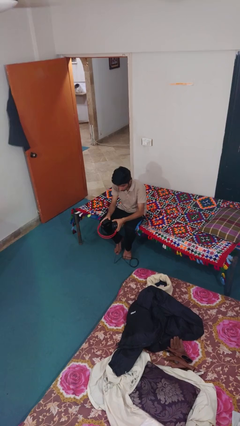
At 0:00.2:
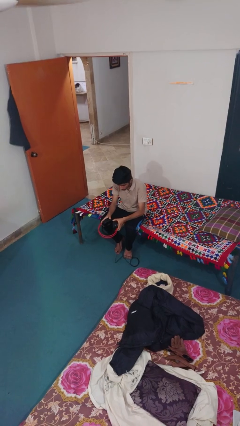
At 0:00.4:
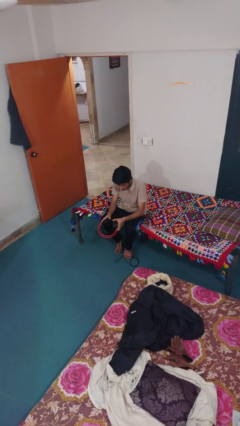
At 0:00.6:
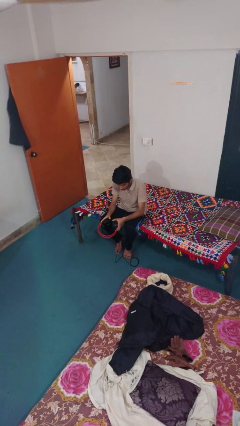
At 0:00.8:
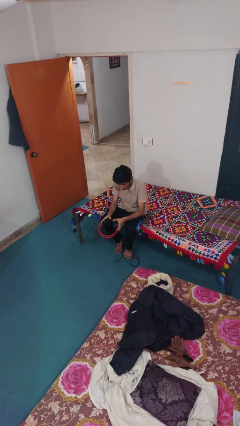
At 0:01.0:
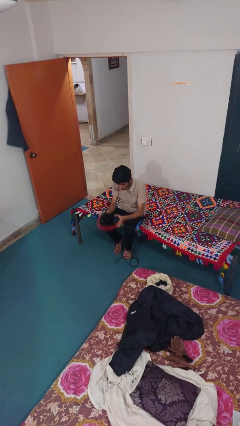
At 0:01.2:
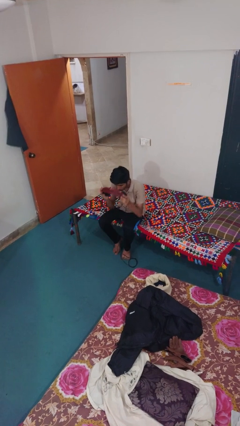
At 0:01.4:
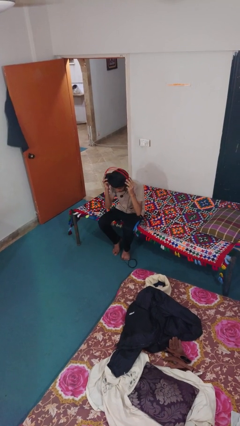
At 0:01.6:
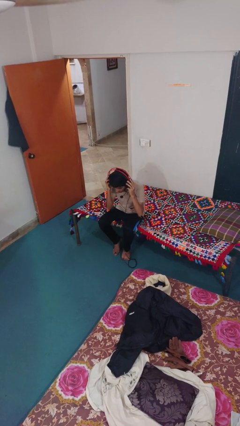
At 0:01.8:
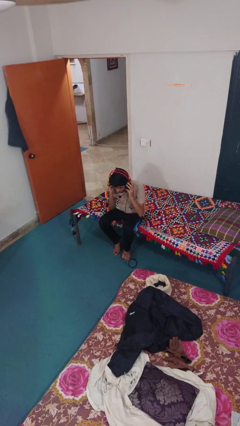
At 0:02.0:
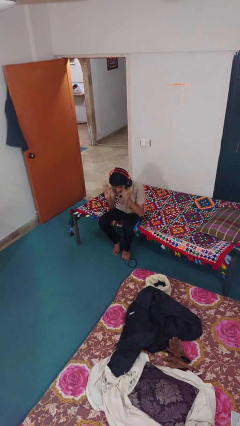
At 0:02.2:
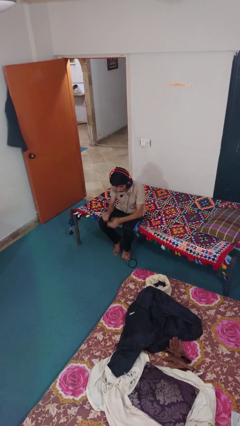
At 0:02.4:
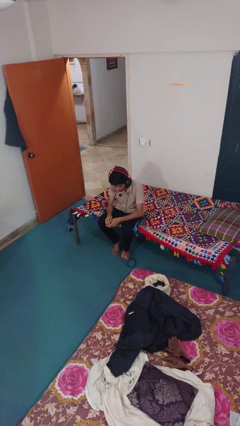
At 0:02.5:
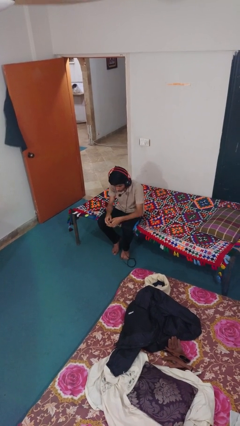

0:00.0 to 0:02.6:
person puts on headphones

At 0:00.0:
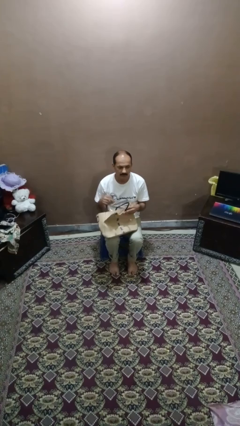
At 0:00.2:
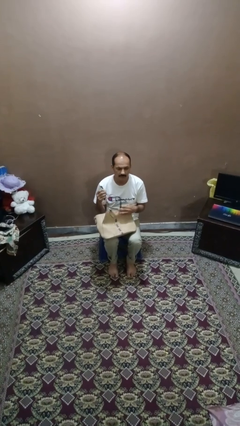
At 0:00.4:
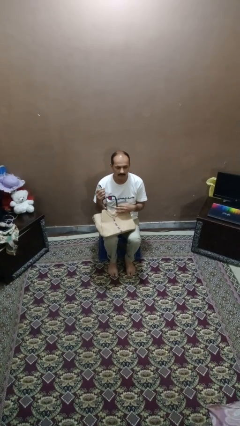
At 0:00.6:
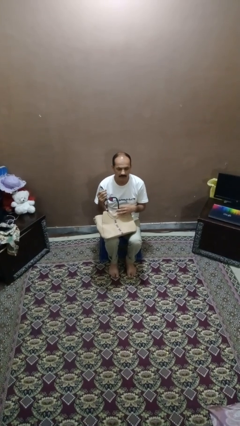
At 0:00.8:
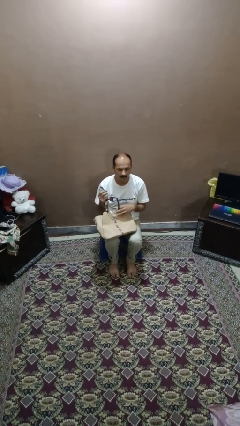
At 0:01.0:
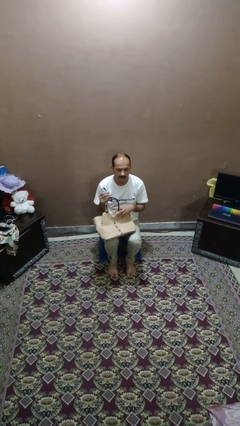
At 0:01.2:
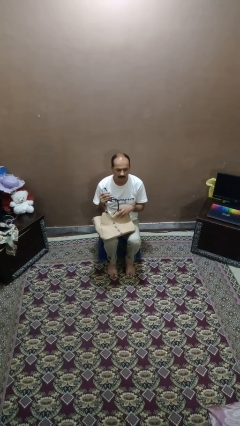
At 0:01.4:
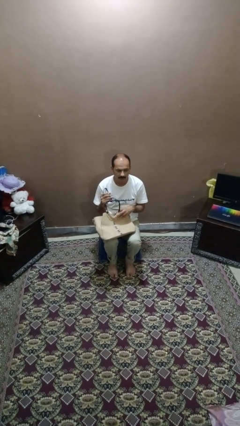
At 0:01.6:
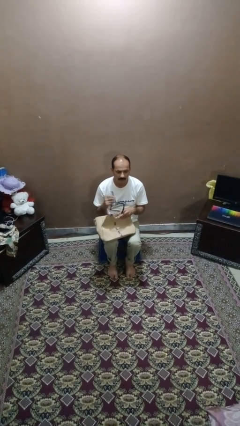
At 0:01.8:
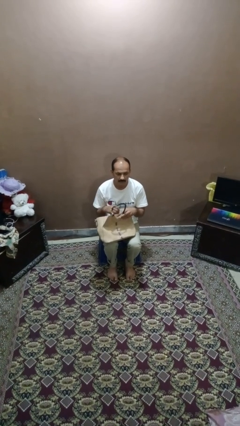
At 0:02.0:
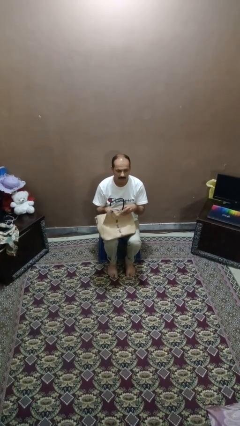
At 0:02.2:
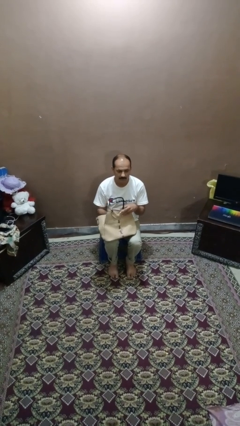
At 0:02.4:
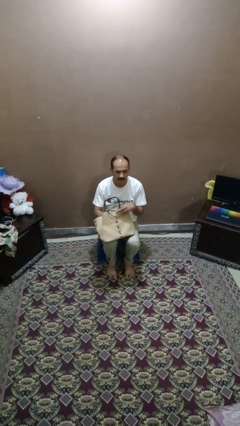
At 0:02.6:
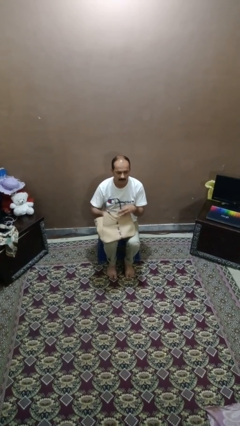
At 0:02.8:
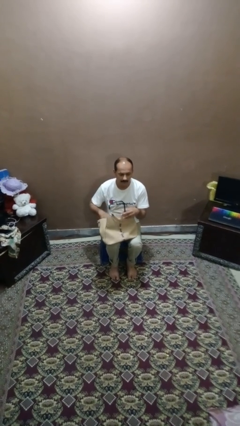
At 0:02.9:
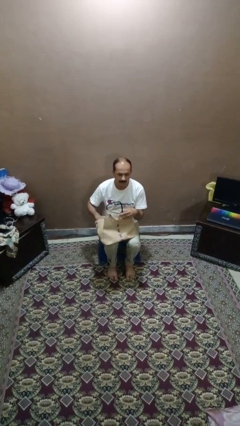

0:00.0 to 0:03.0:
person puts object into purse

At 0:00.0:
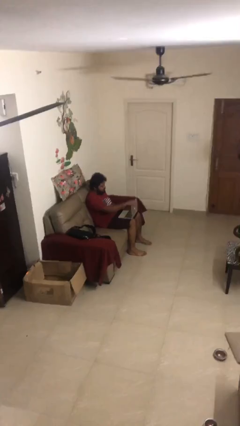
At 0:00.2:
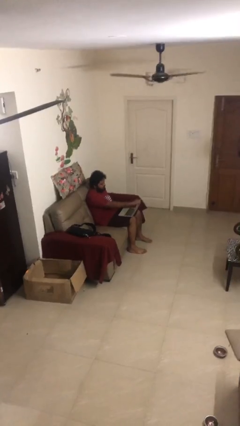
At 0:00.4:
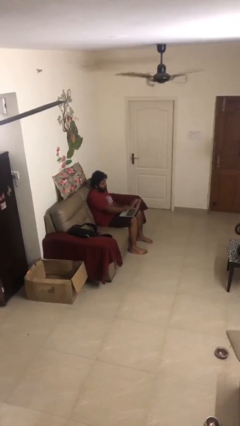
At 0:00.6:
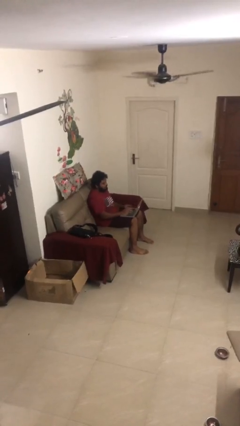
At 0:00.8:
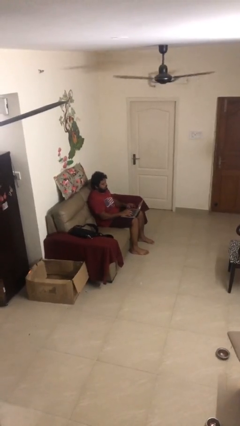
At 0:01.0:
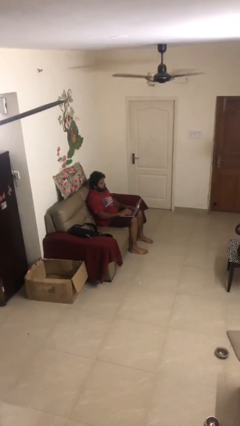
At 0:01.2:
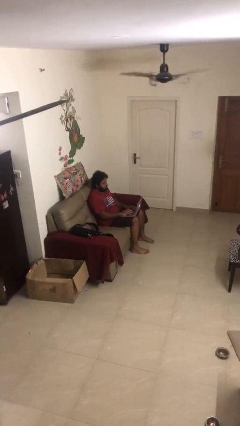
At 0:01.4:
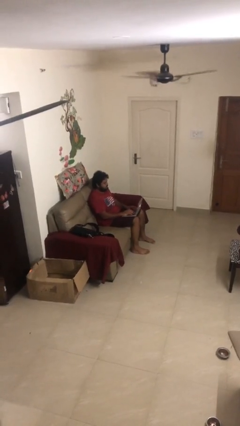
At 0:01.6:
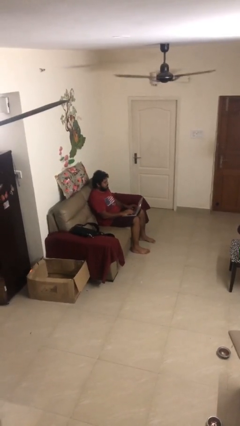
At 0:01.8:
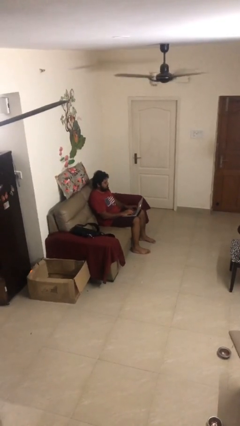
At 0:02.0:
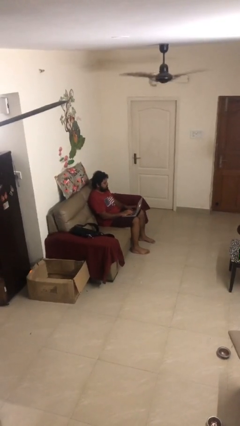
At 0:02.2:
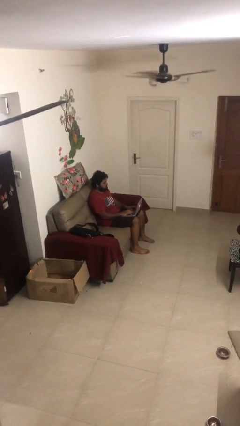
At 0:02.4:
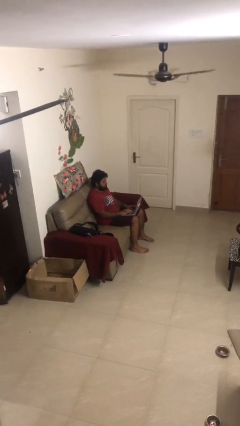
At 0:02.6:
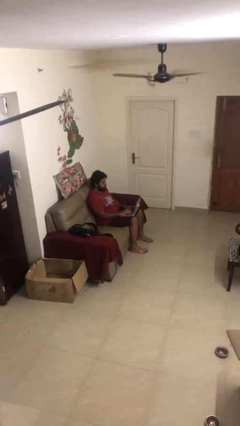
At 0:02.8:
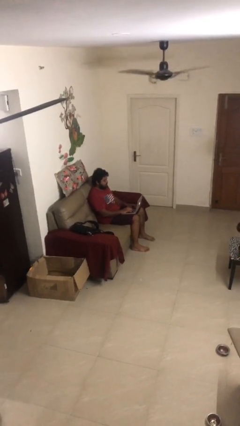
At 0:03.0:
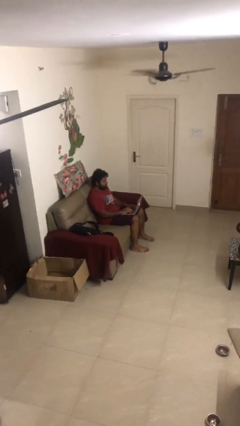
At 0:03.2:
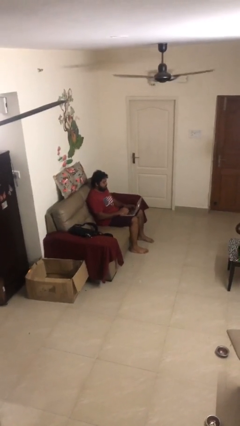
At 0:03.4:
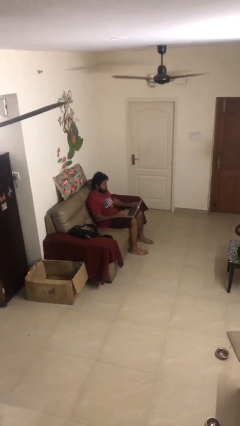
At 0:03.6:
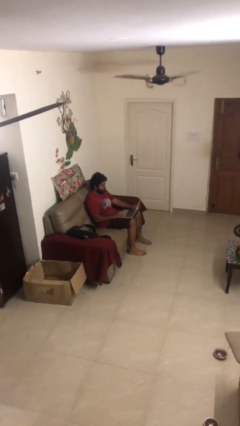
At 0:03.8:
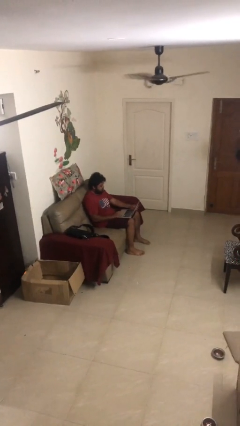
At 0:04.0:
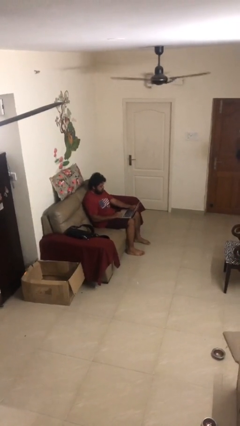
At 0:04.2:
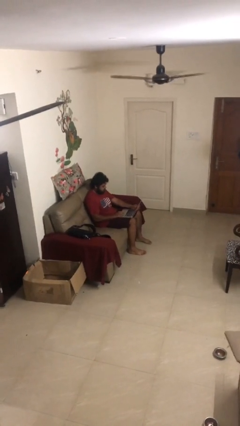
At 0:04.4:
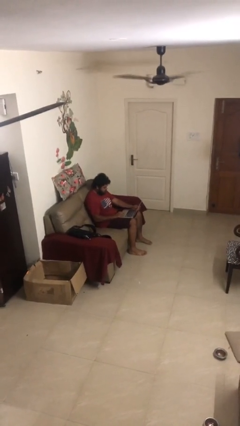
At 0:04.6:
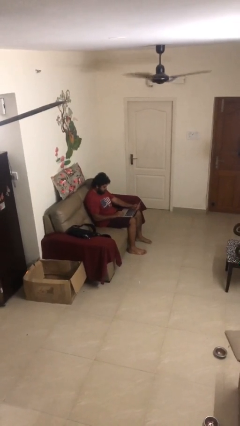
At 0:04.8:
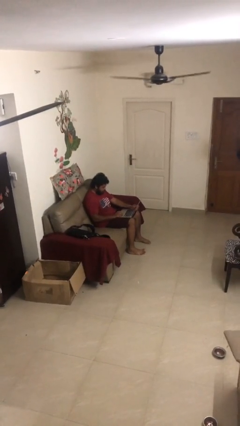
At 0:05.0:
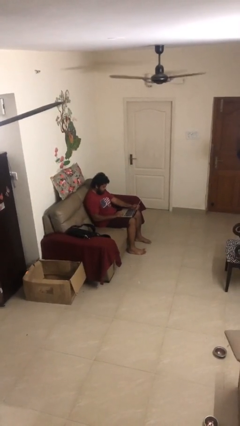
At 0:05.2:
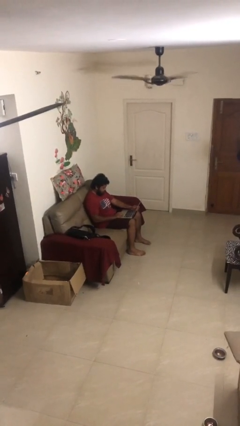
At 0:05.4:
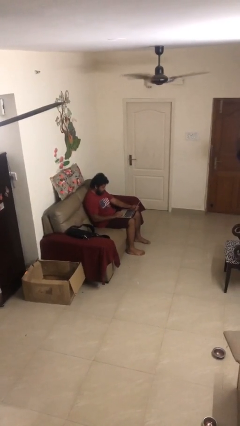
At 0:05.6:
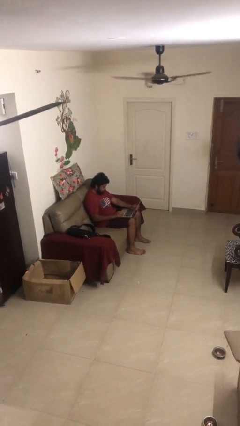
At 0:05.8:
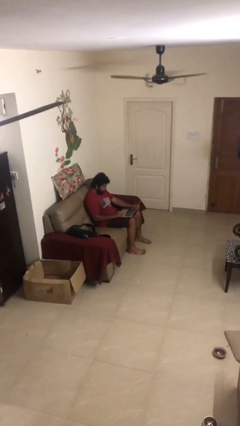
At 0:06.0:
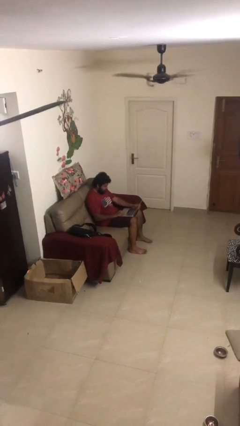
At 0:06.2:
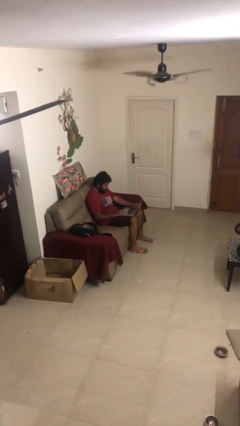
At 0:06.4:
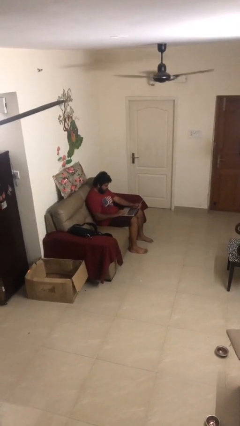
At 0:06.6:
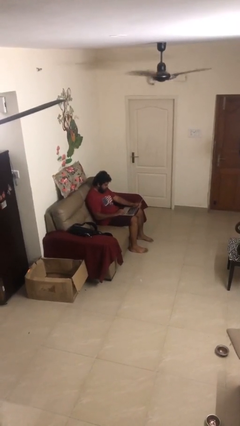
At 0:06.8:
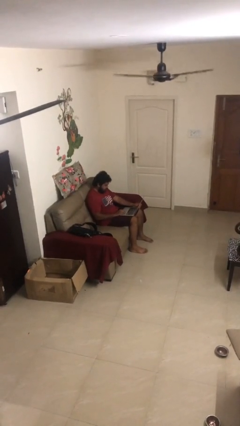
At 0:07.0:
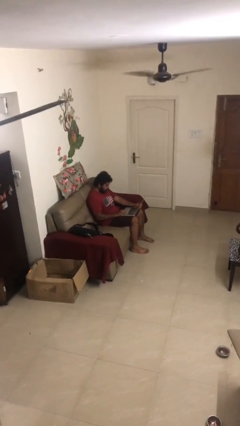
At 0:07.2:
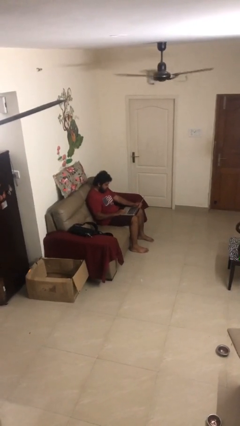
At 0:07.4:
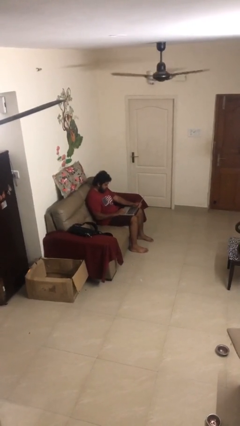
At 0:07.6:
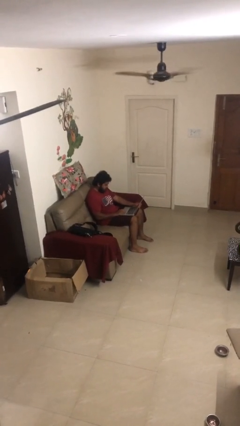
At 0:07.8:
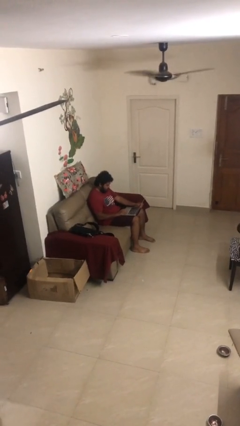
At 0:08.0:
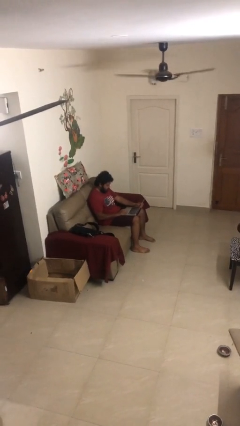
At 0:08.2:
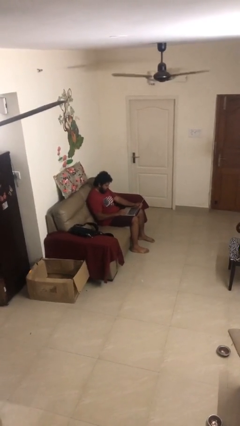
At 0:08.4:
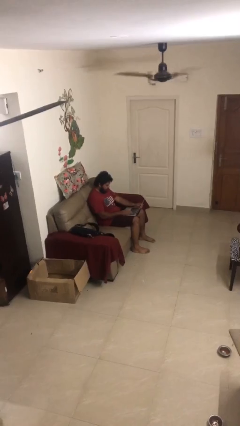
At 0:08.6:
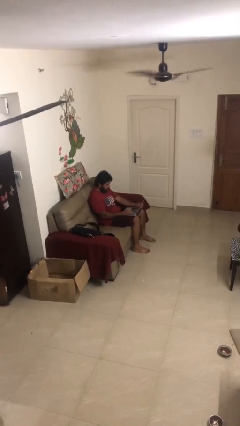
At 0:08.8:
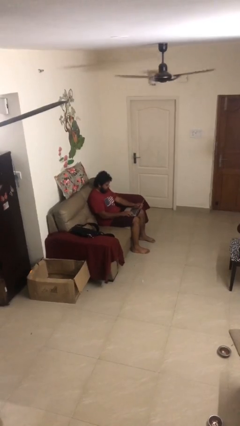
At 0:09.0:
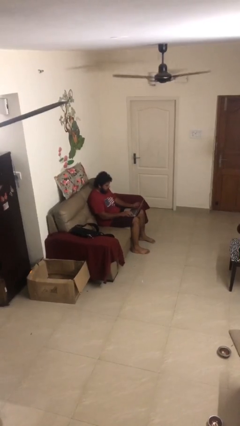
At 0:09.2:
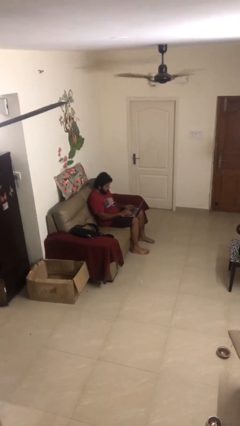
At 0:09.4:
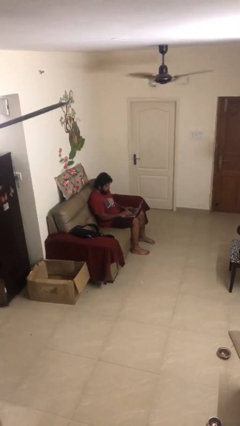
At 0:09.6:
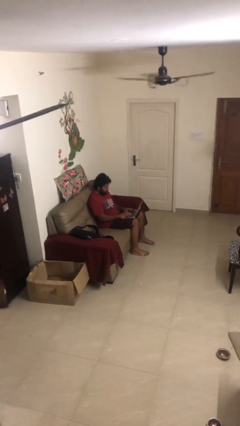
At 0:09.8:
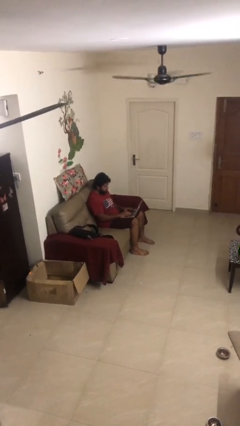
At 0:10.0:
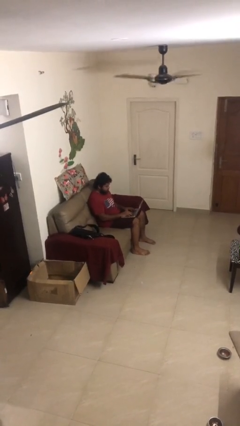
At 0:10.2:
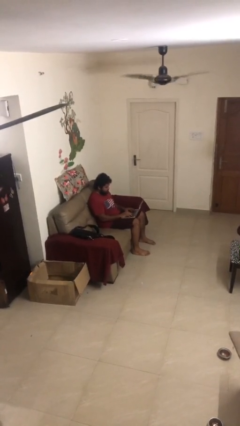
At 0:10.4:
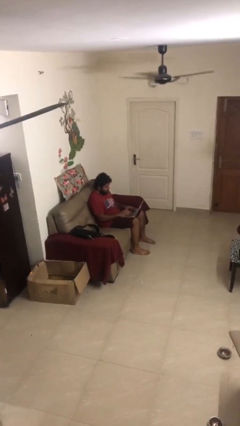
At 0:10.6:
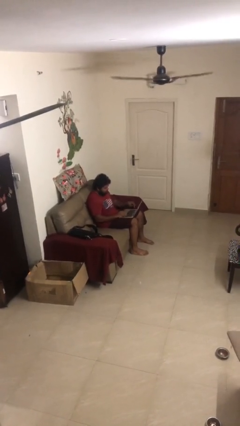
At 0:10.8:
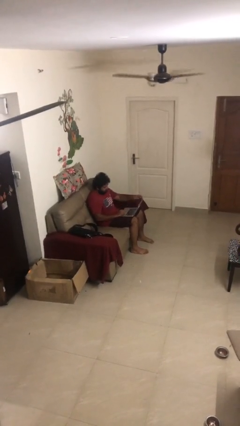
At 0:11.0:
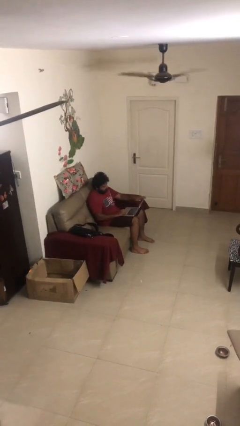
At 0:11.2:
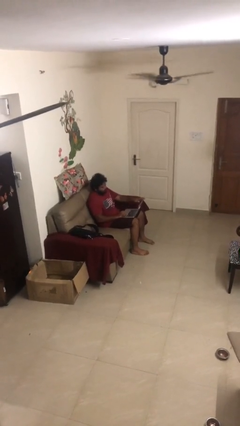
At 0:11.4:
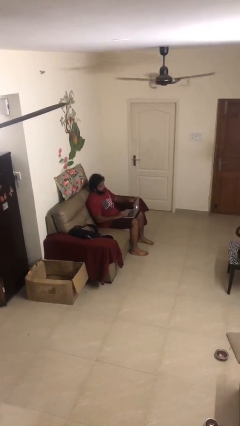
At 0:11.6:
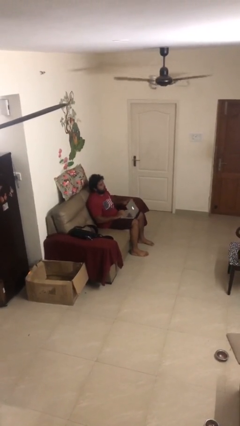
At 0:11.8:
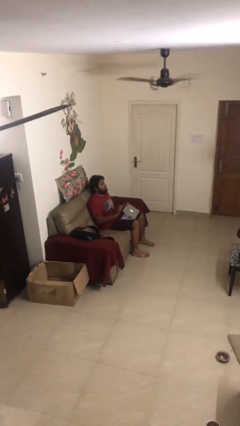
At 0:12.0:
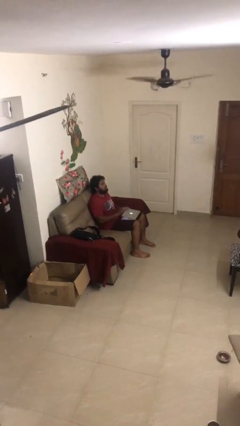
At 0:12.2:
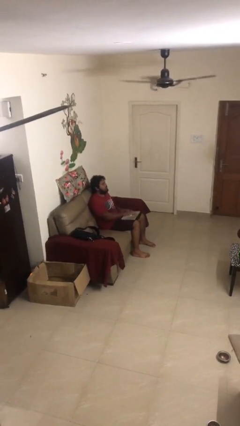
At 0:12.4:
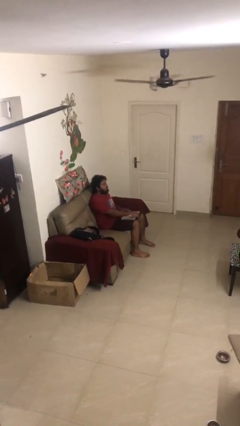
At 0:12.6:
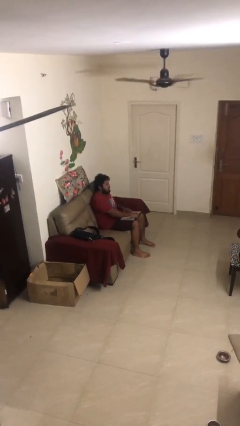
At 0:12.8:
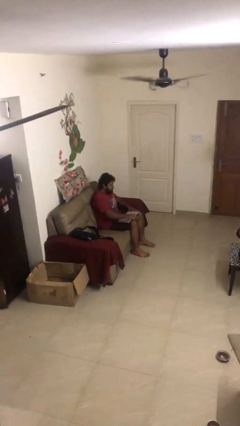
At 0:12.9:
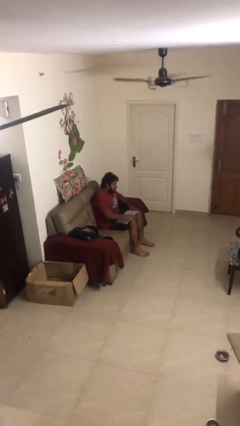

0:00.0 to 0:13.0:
person interacts with laptop
